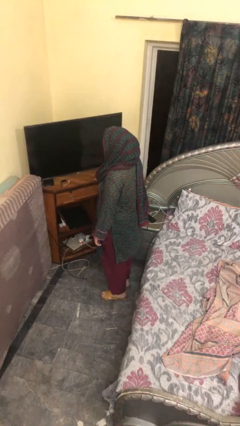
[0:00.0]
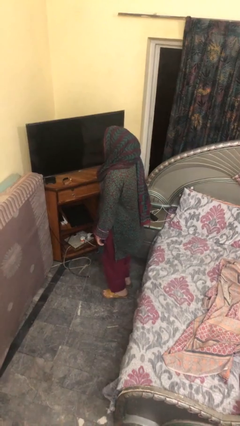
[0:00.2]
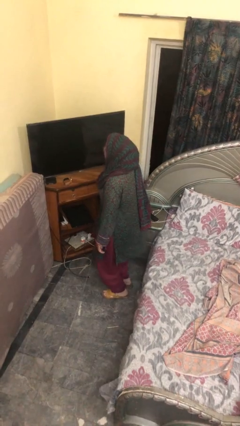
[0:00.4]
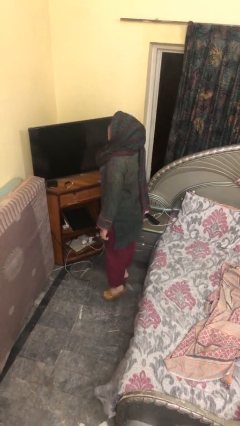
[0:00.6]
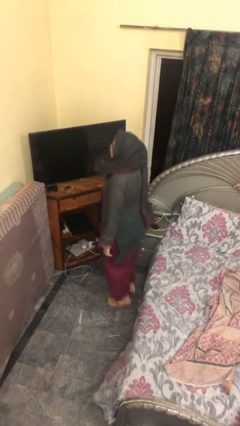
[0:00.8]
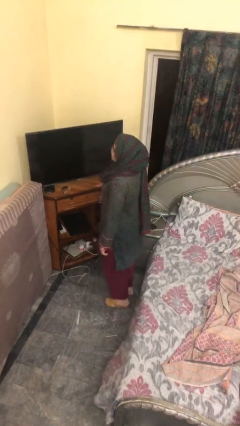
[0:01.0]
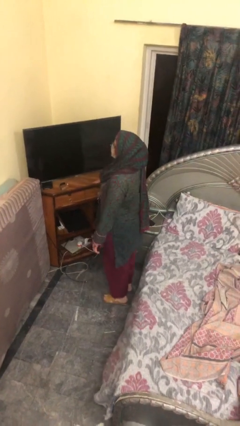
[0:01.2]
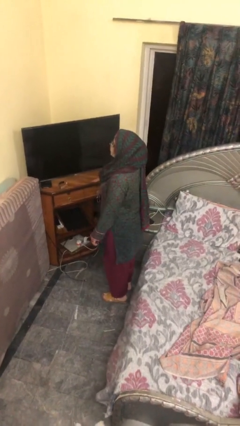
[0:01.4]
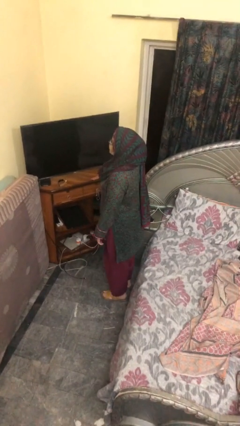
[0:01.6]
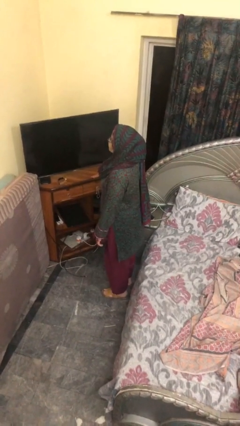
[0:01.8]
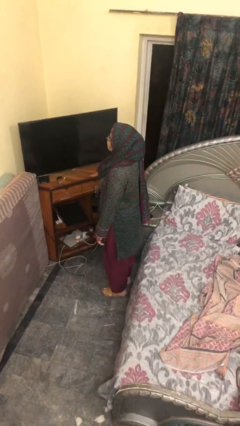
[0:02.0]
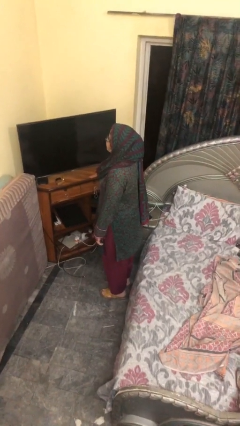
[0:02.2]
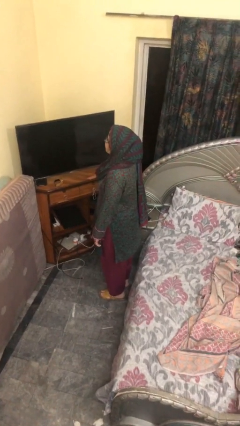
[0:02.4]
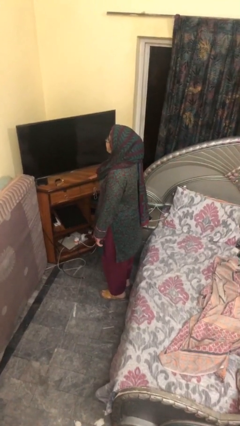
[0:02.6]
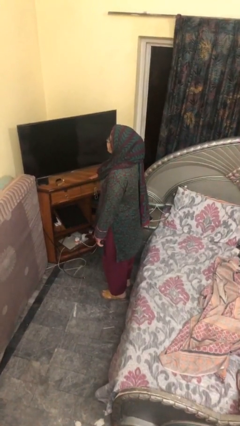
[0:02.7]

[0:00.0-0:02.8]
person jumps

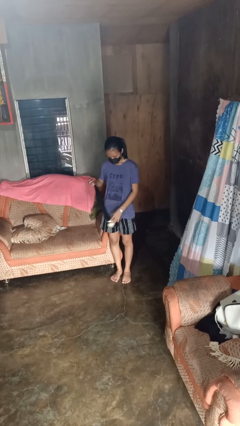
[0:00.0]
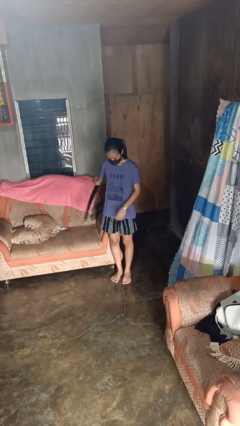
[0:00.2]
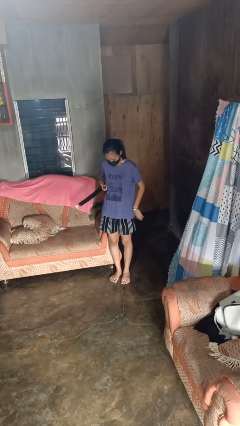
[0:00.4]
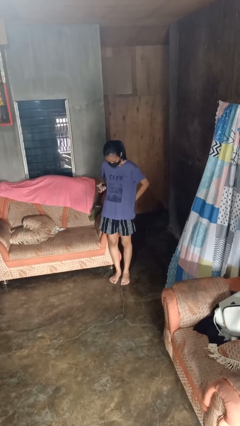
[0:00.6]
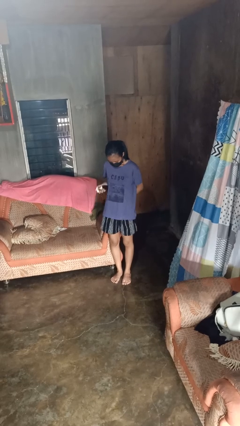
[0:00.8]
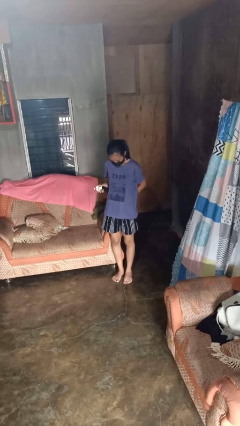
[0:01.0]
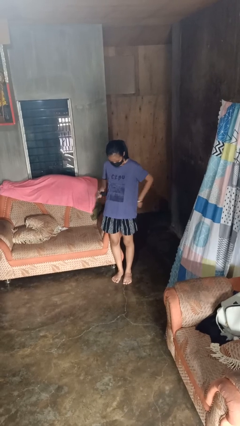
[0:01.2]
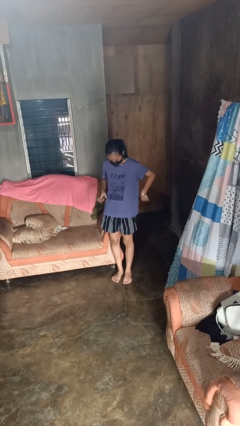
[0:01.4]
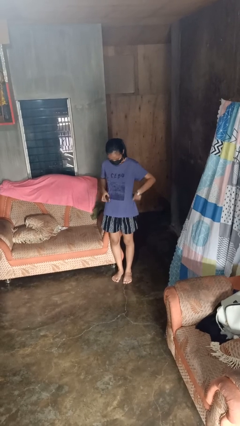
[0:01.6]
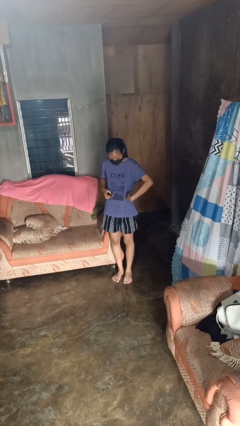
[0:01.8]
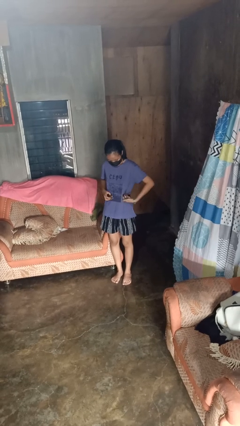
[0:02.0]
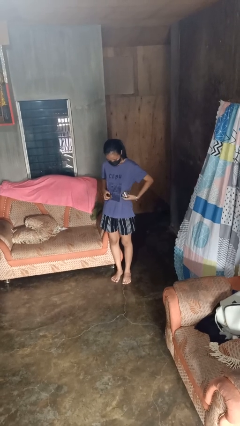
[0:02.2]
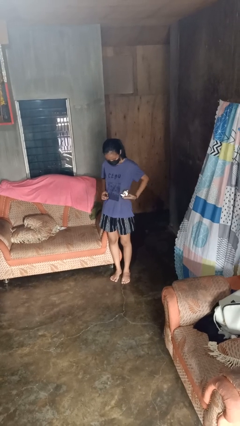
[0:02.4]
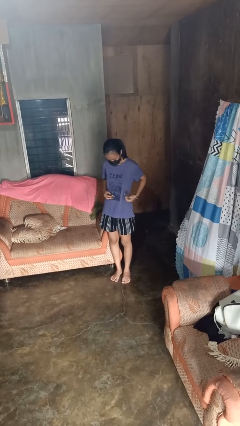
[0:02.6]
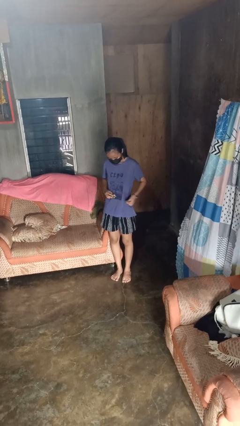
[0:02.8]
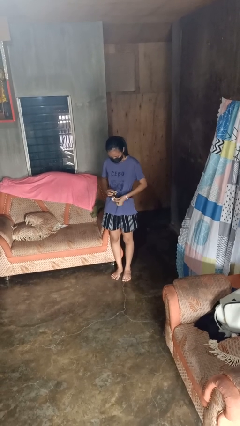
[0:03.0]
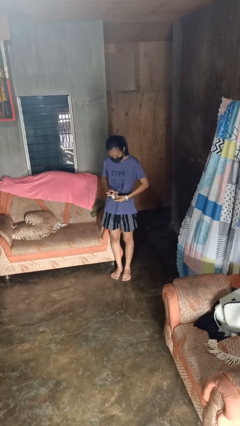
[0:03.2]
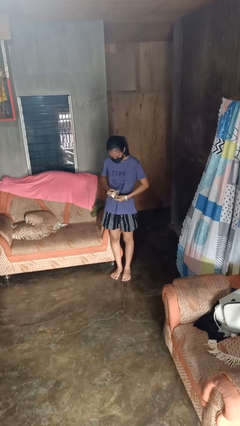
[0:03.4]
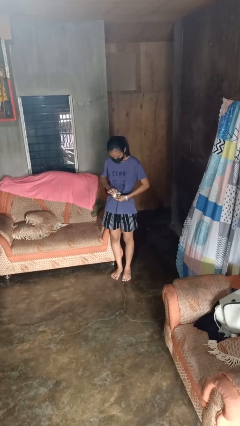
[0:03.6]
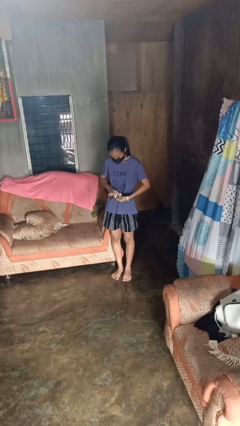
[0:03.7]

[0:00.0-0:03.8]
person puts on belt

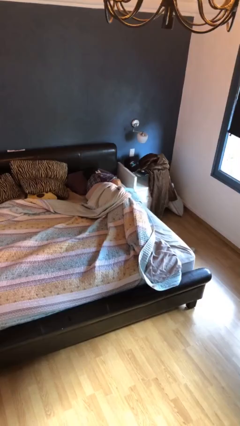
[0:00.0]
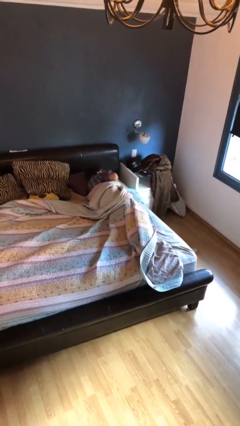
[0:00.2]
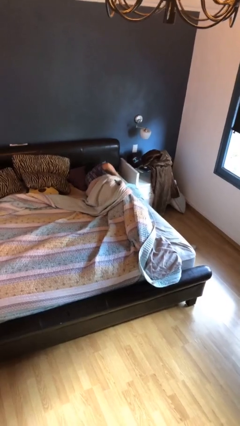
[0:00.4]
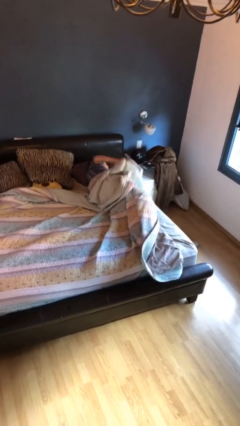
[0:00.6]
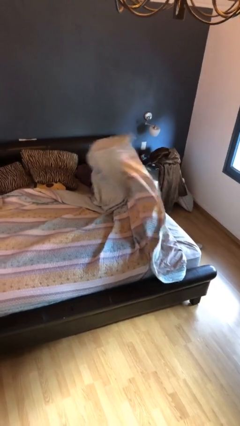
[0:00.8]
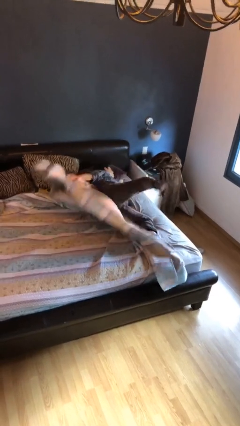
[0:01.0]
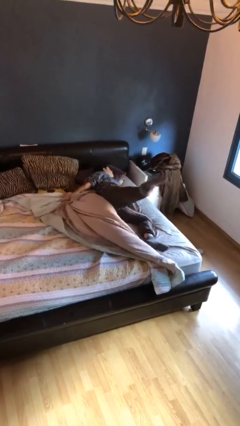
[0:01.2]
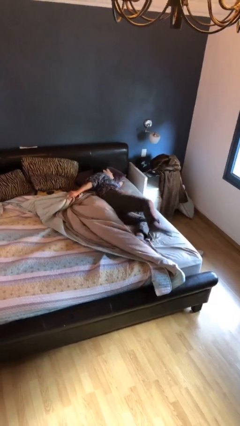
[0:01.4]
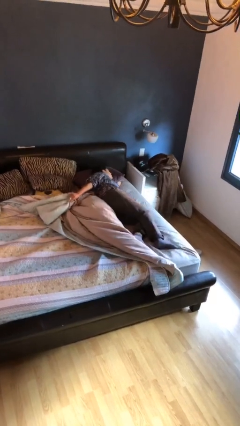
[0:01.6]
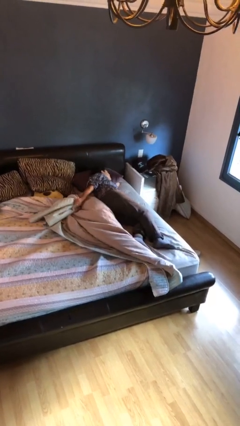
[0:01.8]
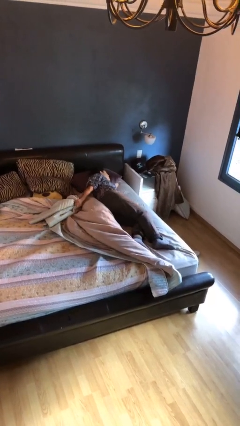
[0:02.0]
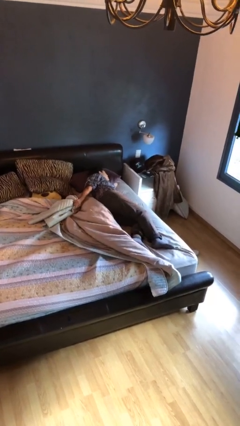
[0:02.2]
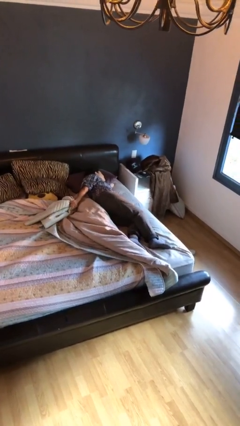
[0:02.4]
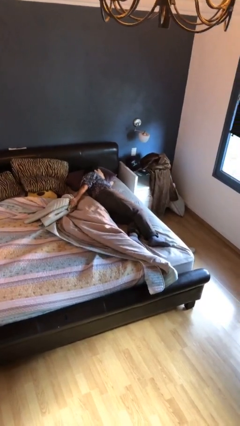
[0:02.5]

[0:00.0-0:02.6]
person uncovers with bedsheets

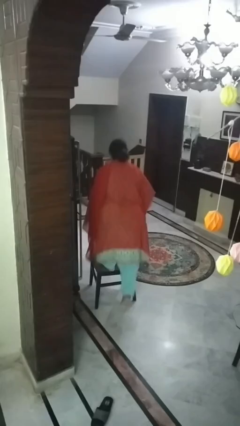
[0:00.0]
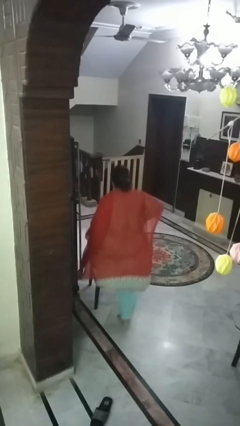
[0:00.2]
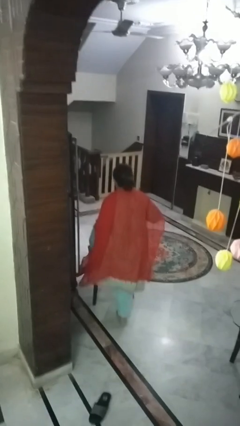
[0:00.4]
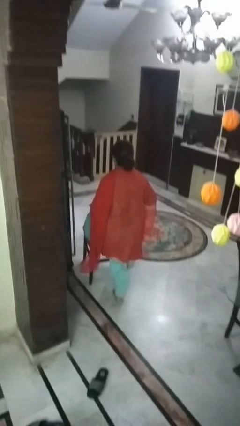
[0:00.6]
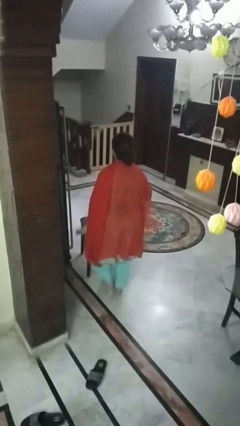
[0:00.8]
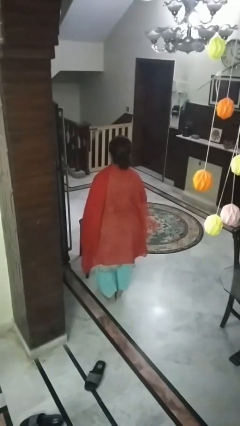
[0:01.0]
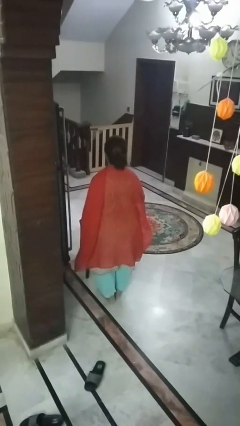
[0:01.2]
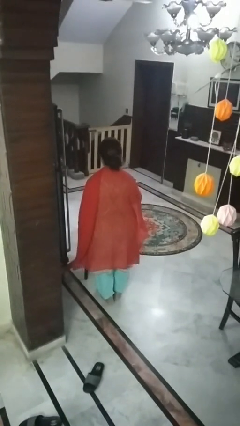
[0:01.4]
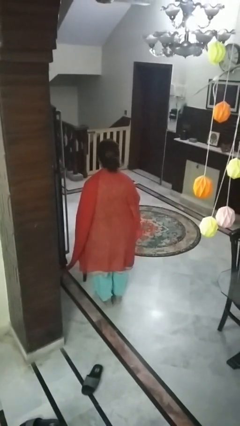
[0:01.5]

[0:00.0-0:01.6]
person climbs off chair

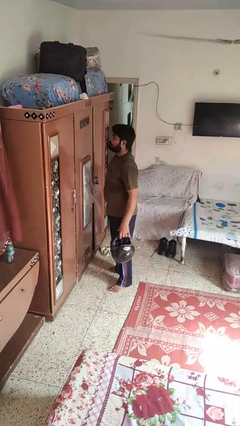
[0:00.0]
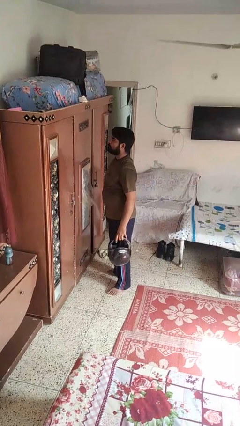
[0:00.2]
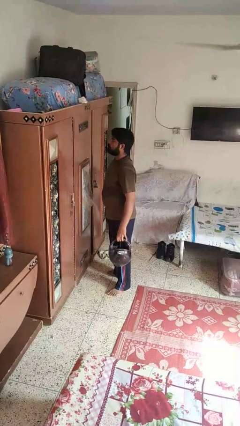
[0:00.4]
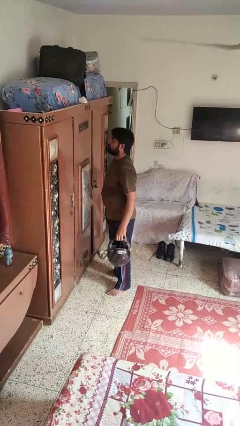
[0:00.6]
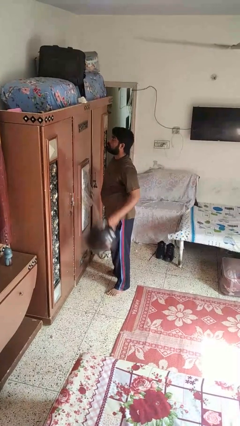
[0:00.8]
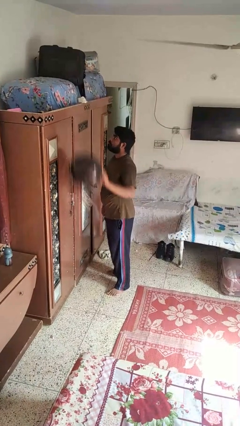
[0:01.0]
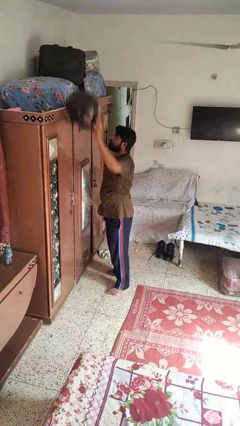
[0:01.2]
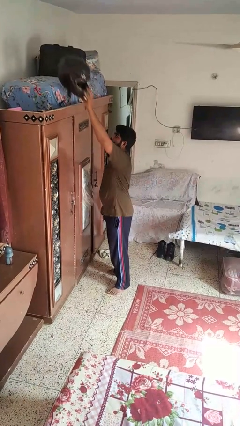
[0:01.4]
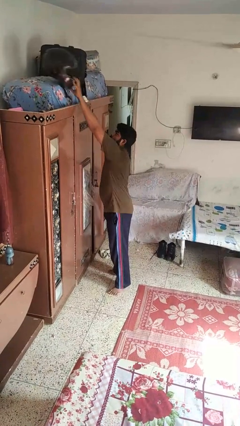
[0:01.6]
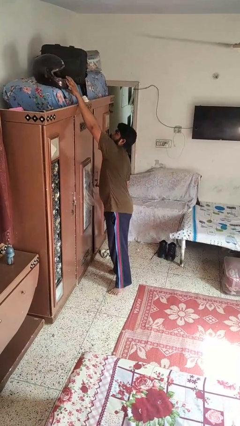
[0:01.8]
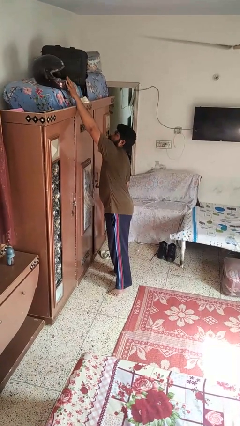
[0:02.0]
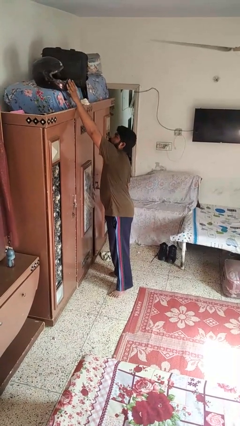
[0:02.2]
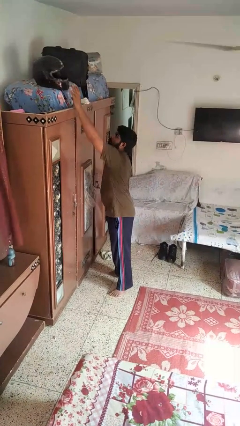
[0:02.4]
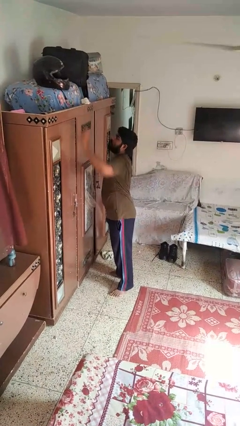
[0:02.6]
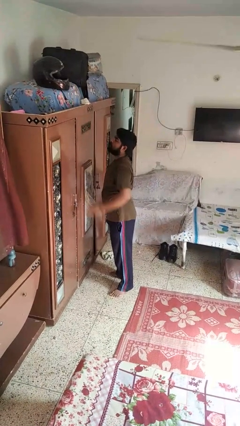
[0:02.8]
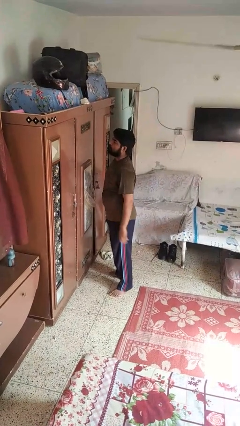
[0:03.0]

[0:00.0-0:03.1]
person puts down object on shelf

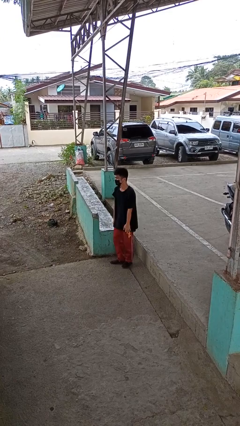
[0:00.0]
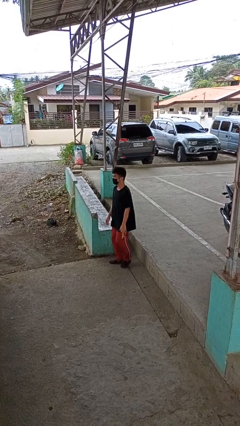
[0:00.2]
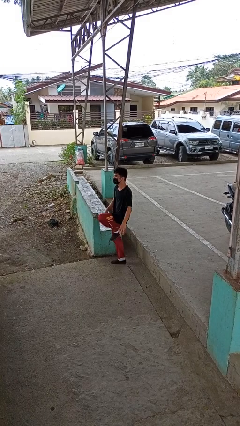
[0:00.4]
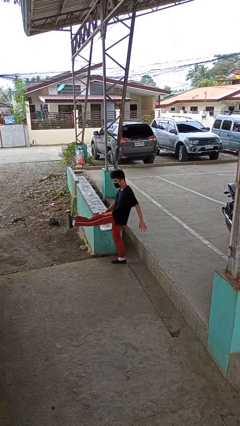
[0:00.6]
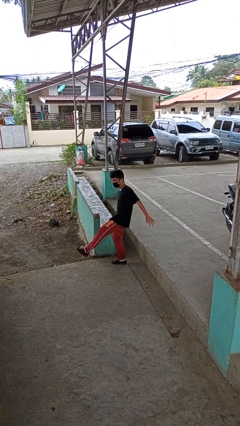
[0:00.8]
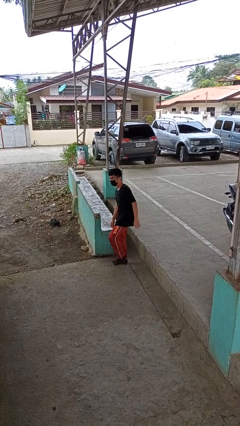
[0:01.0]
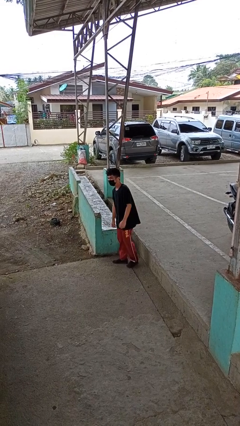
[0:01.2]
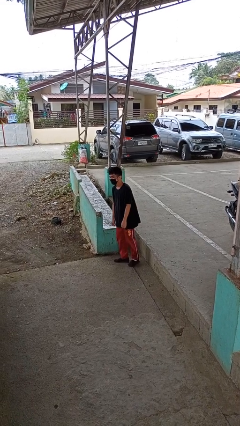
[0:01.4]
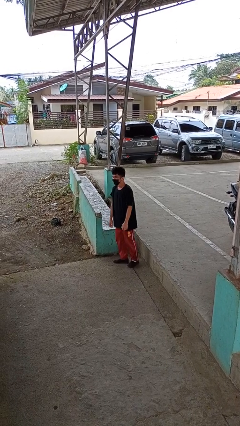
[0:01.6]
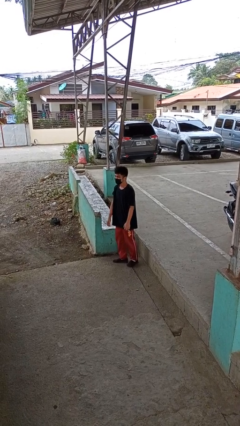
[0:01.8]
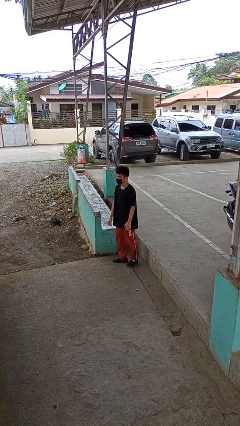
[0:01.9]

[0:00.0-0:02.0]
person karate kicks

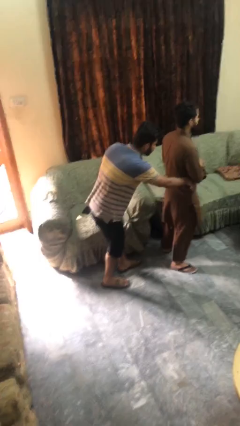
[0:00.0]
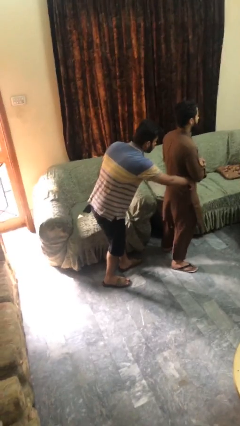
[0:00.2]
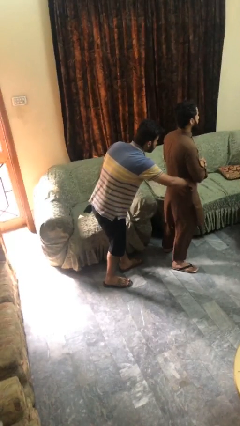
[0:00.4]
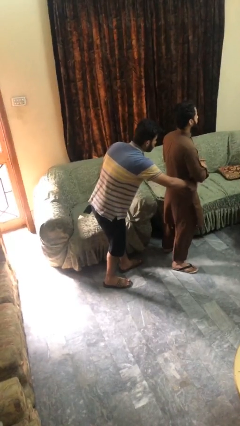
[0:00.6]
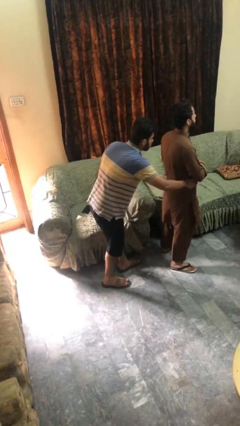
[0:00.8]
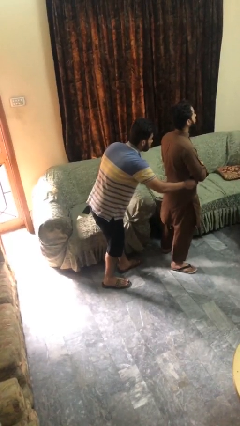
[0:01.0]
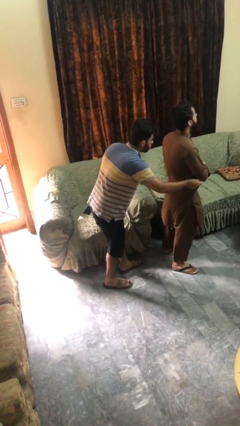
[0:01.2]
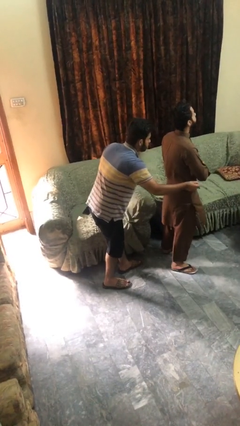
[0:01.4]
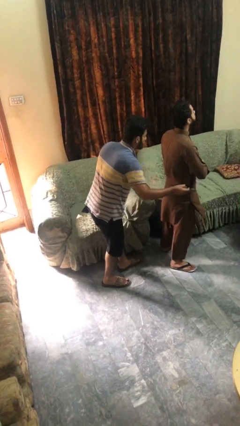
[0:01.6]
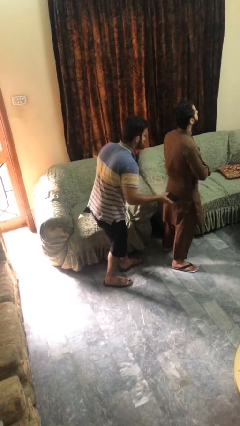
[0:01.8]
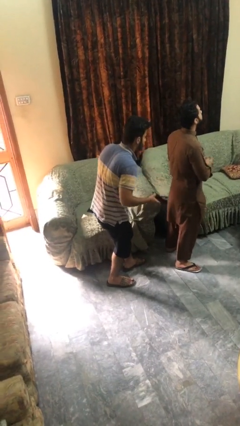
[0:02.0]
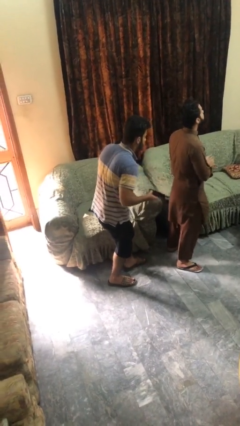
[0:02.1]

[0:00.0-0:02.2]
person steals object from person
